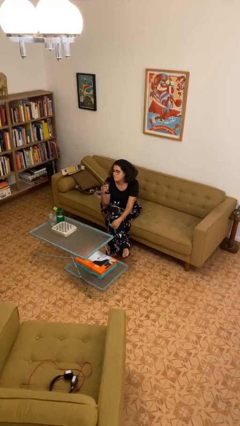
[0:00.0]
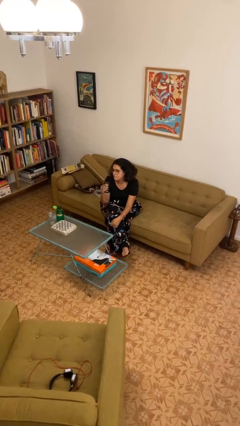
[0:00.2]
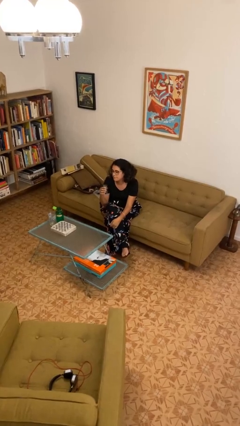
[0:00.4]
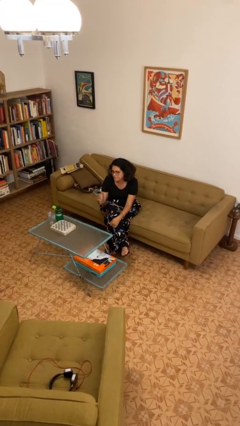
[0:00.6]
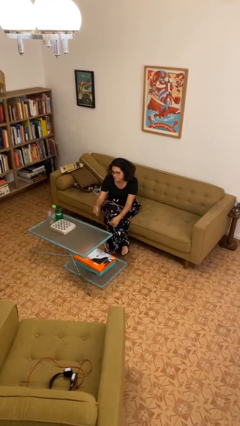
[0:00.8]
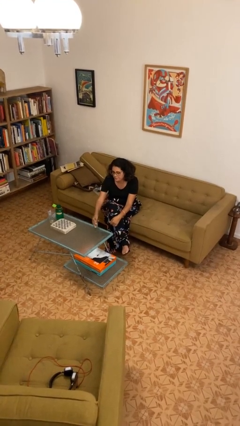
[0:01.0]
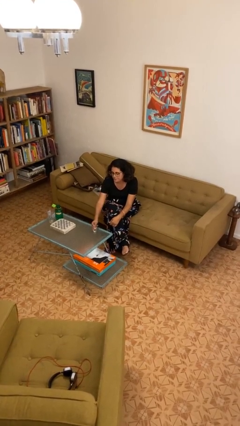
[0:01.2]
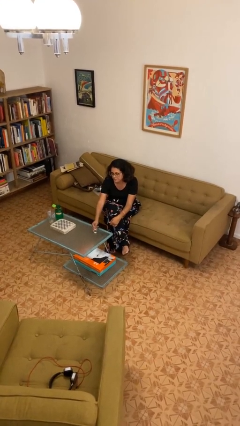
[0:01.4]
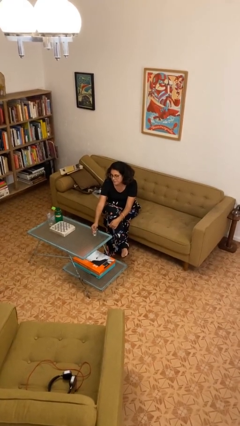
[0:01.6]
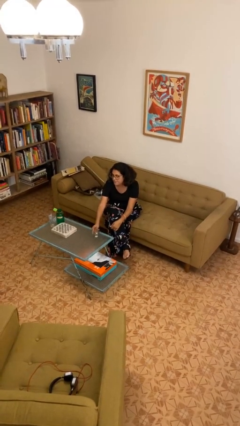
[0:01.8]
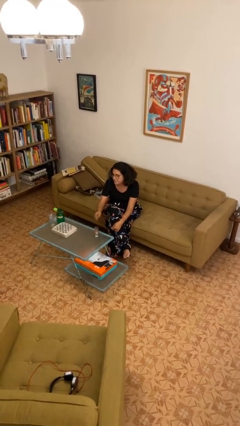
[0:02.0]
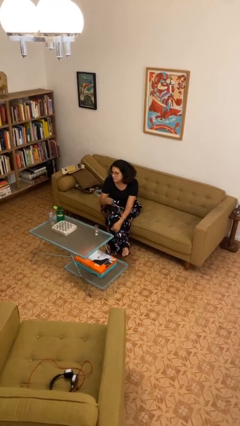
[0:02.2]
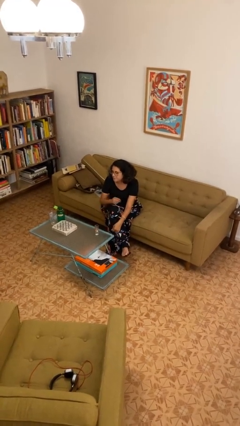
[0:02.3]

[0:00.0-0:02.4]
person puts down object on table

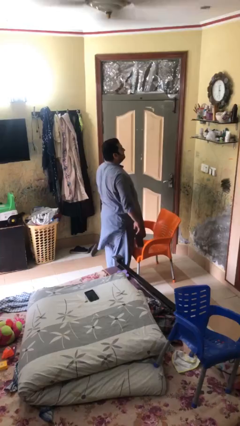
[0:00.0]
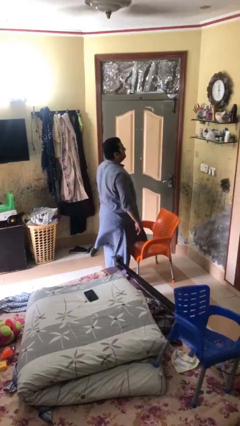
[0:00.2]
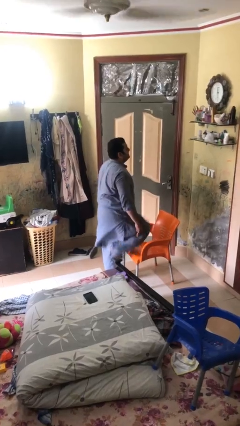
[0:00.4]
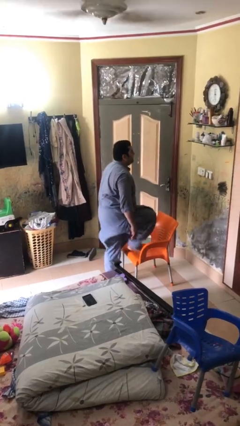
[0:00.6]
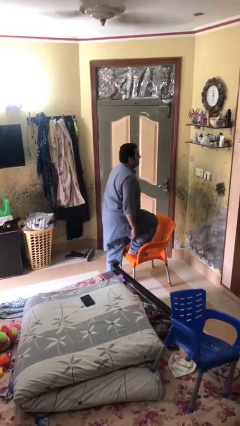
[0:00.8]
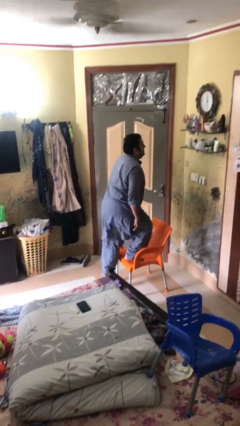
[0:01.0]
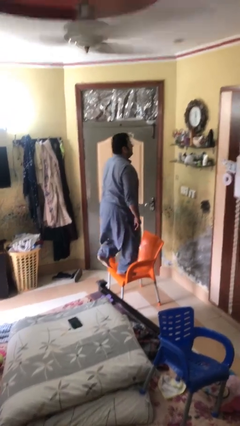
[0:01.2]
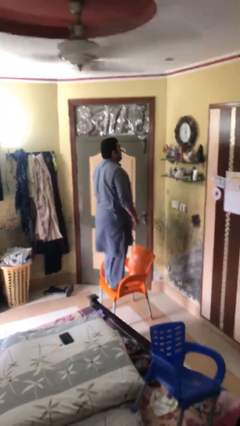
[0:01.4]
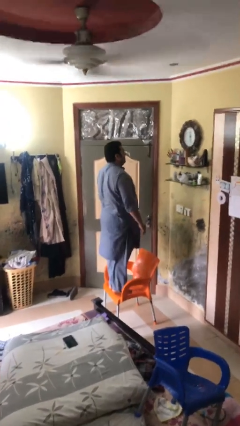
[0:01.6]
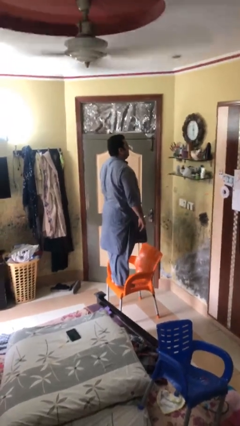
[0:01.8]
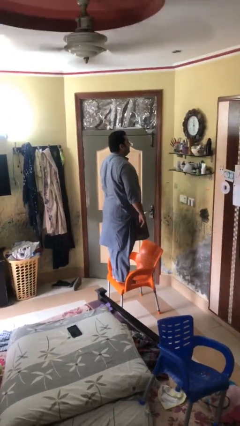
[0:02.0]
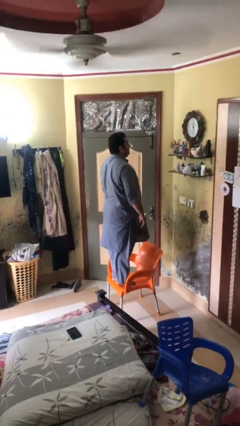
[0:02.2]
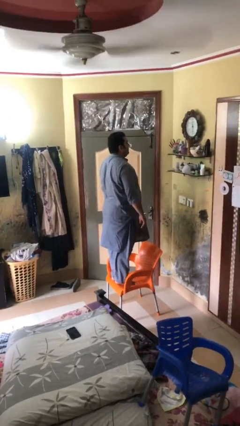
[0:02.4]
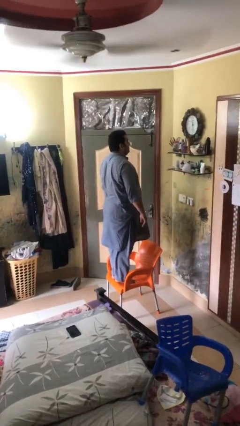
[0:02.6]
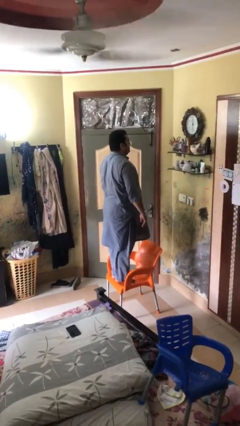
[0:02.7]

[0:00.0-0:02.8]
person climbs on chair

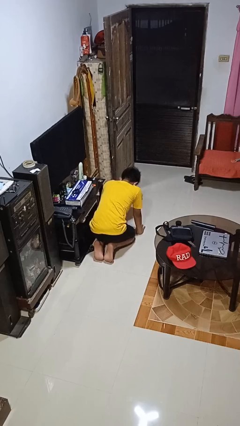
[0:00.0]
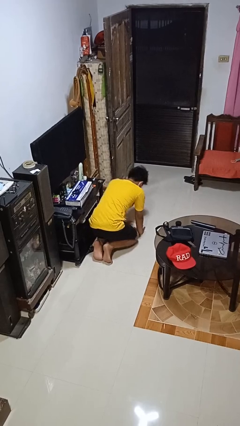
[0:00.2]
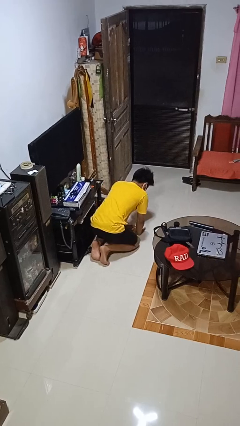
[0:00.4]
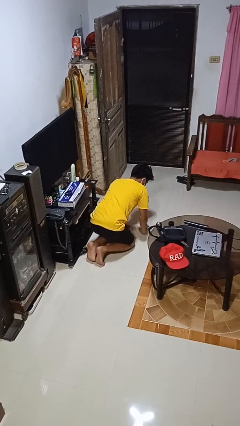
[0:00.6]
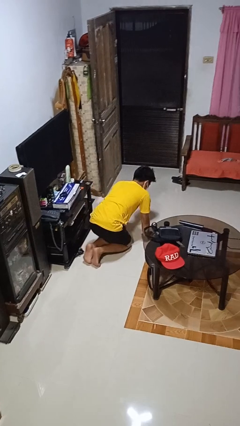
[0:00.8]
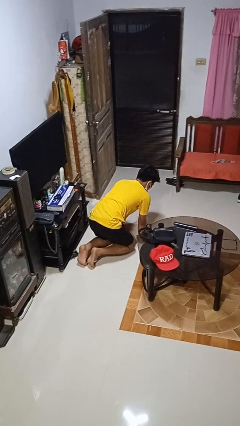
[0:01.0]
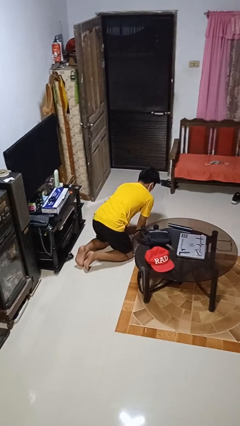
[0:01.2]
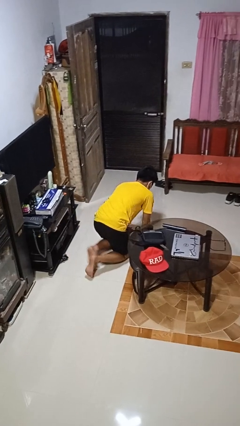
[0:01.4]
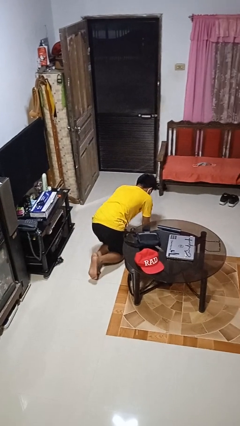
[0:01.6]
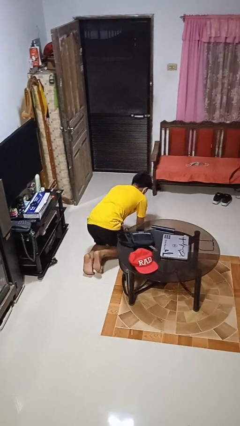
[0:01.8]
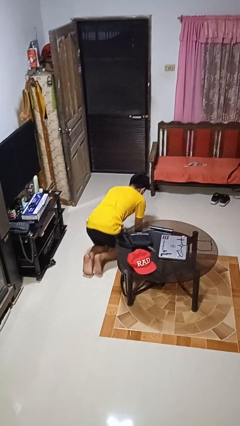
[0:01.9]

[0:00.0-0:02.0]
person crawls

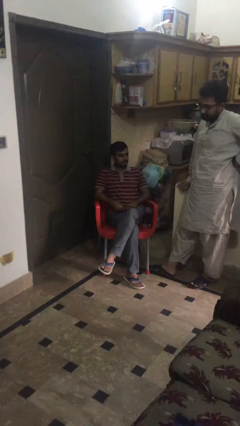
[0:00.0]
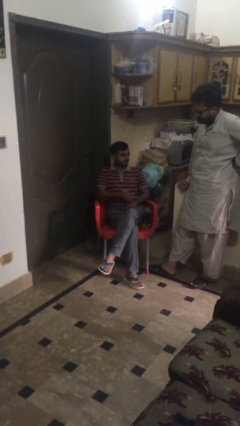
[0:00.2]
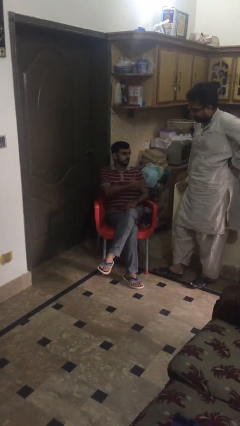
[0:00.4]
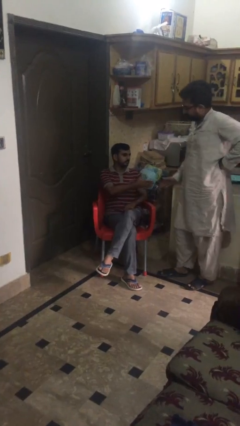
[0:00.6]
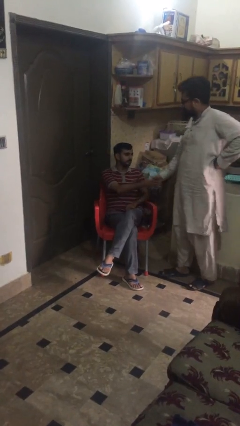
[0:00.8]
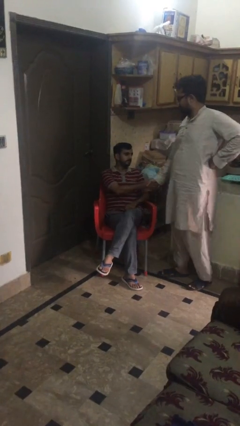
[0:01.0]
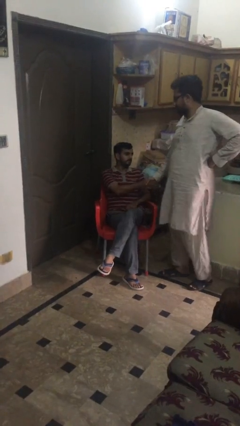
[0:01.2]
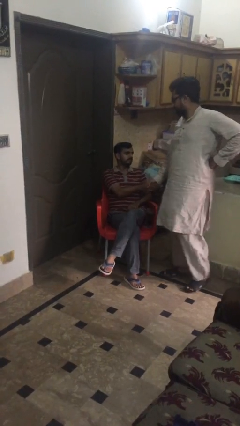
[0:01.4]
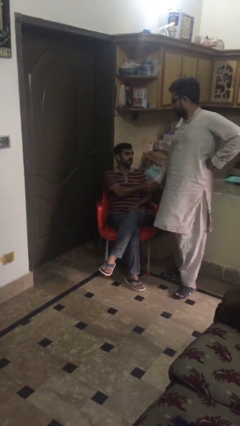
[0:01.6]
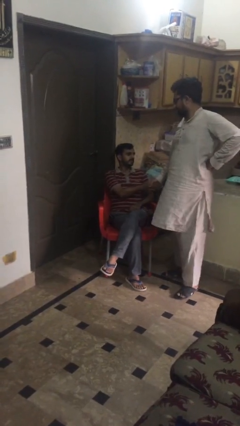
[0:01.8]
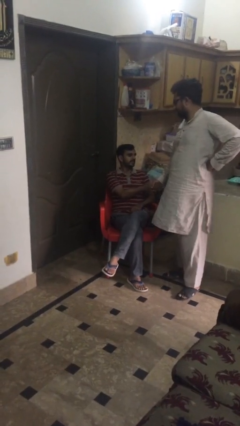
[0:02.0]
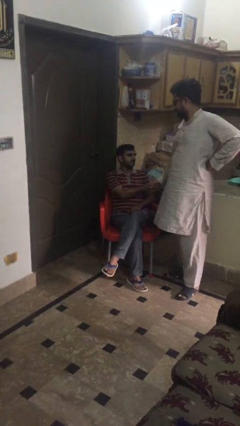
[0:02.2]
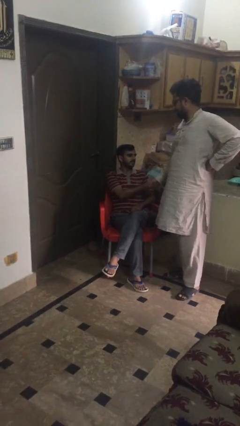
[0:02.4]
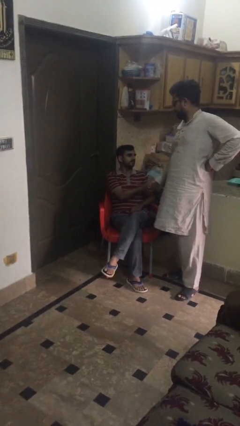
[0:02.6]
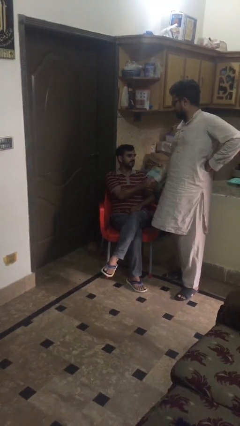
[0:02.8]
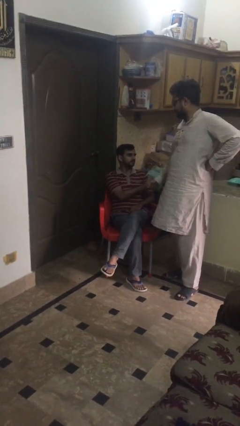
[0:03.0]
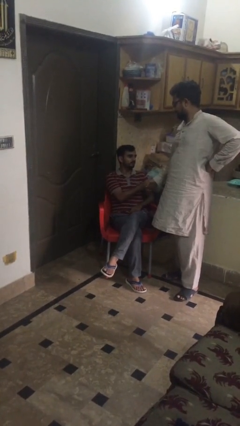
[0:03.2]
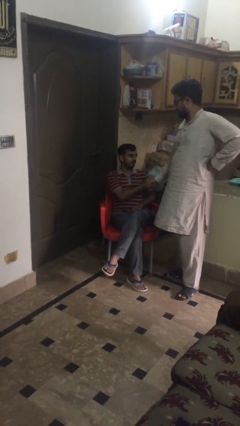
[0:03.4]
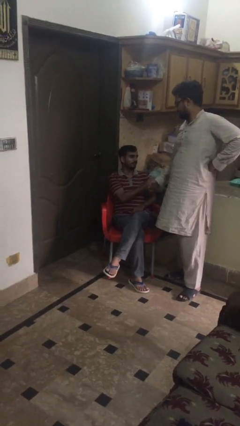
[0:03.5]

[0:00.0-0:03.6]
person shakes hand

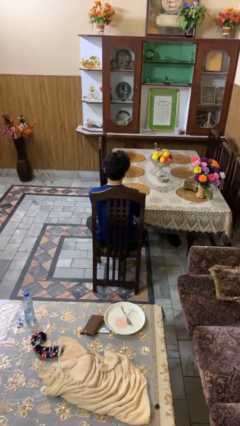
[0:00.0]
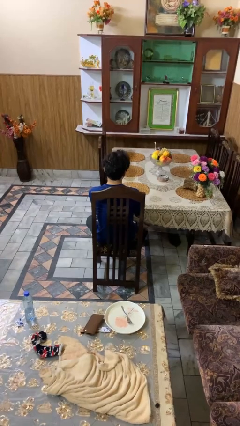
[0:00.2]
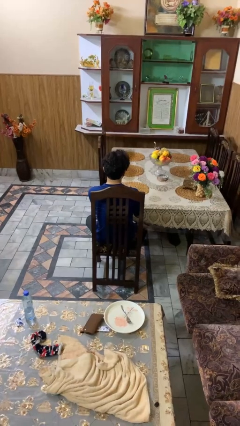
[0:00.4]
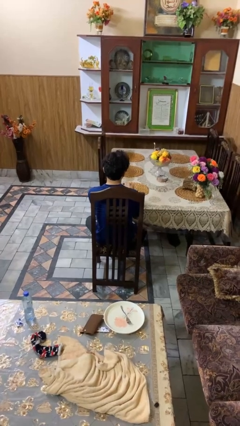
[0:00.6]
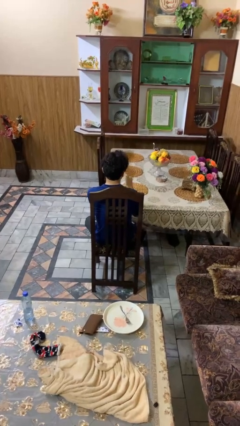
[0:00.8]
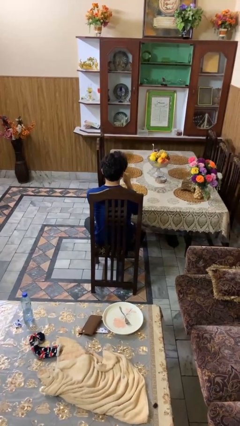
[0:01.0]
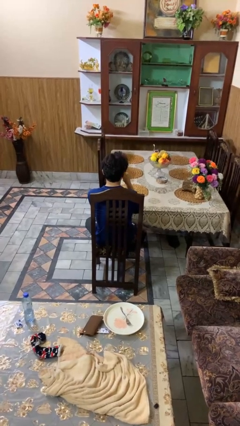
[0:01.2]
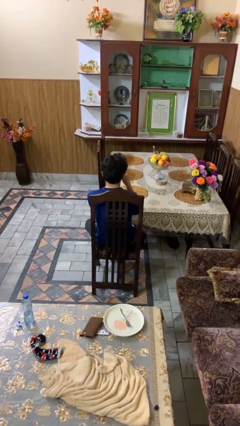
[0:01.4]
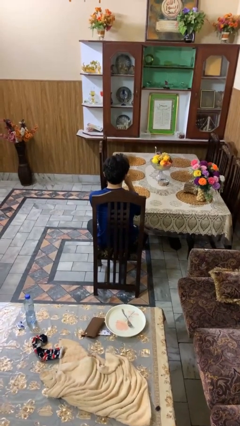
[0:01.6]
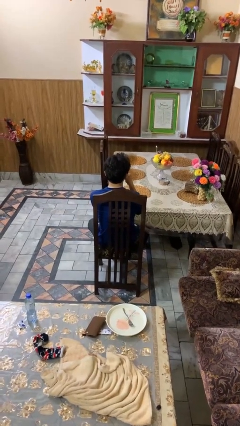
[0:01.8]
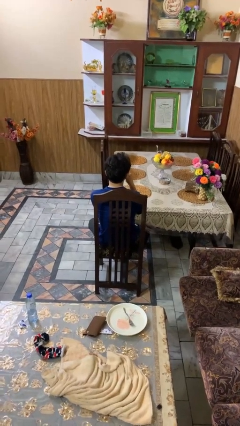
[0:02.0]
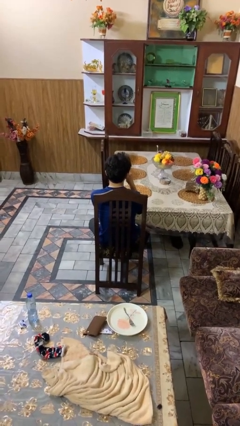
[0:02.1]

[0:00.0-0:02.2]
person drinks from mug

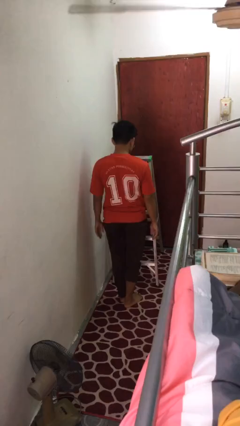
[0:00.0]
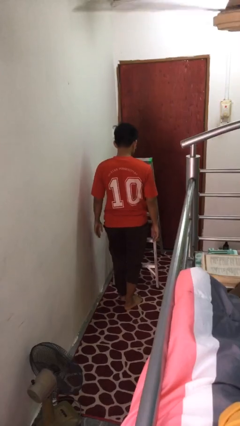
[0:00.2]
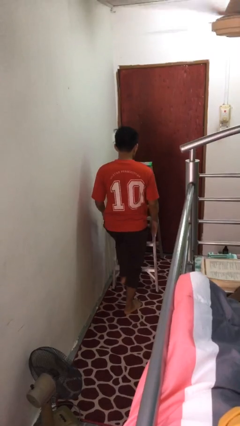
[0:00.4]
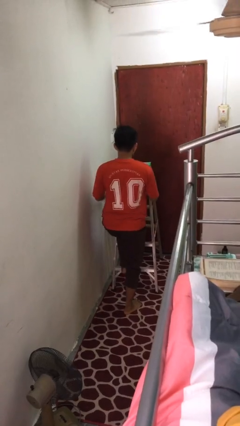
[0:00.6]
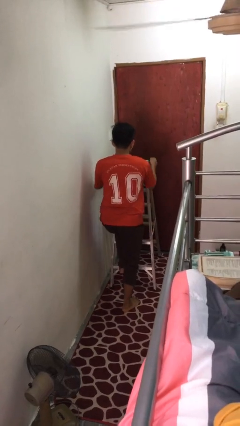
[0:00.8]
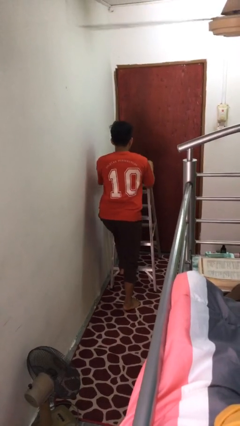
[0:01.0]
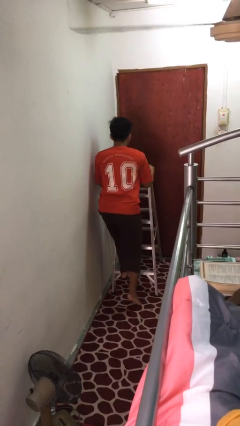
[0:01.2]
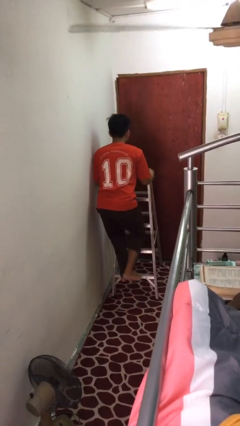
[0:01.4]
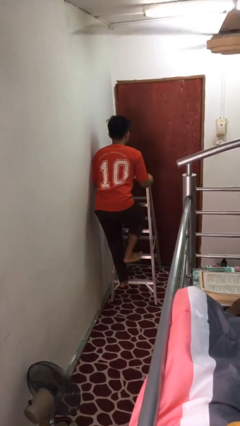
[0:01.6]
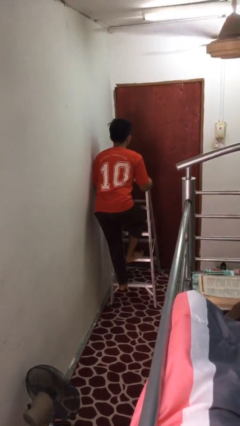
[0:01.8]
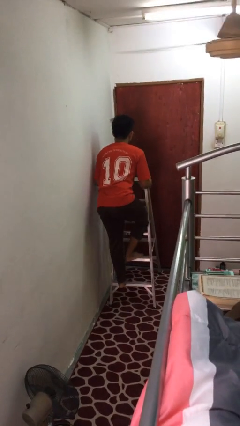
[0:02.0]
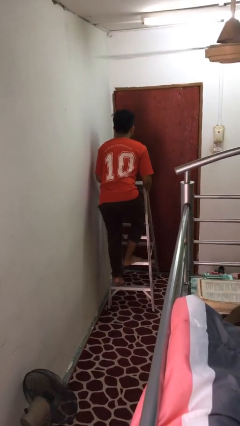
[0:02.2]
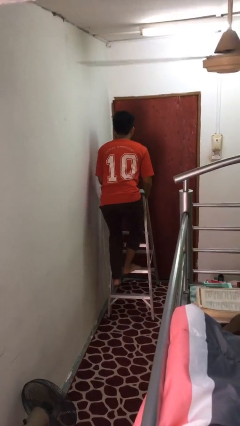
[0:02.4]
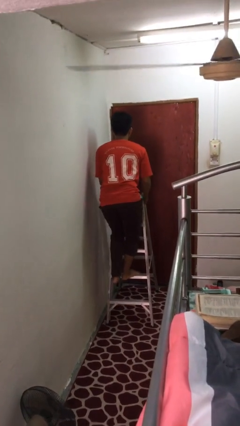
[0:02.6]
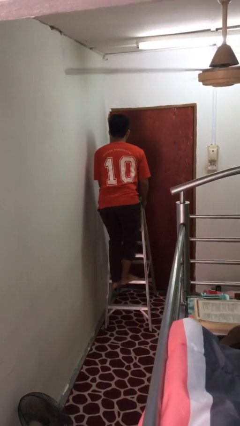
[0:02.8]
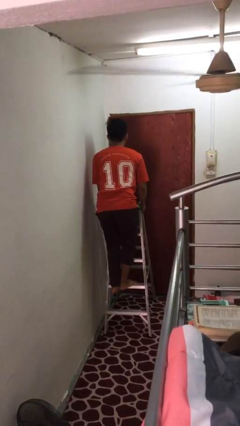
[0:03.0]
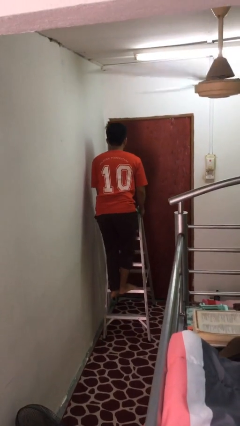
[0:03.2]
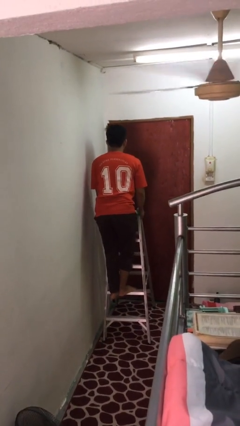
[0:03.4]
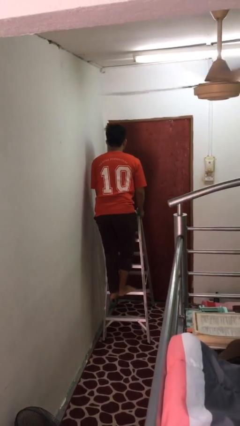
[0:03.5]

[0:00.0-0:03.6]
person climbs up ladder

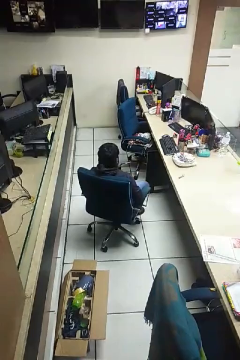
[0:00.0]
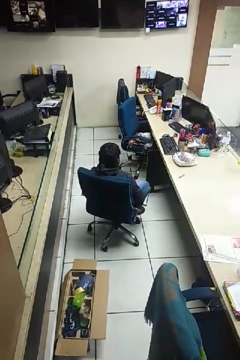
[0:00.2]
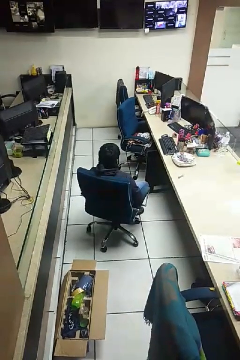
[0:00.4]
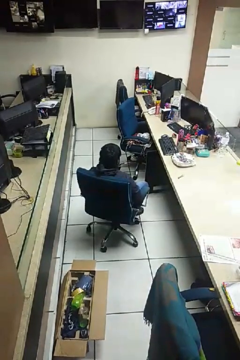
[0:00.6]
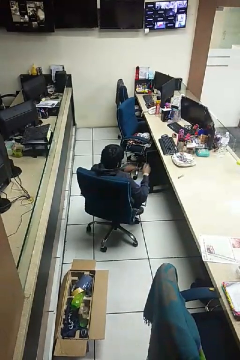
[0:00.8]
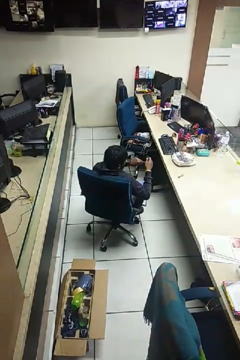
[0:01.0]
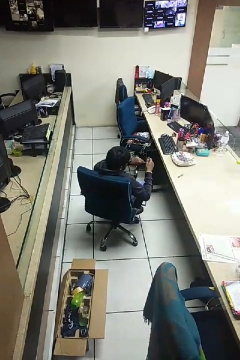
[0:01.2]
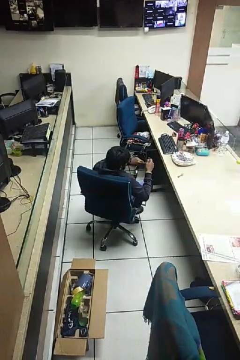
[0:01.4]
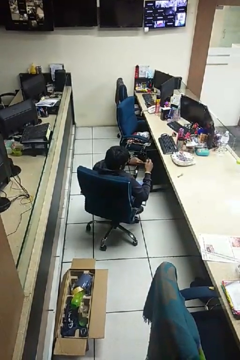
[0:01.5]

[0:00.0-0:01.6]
person files fingernails
